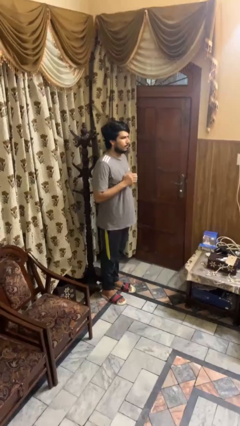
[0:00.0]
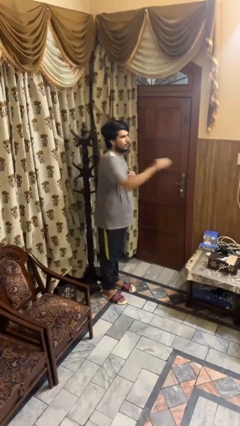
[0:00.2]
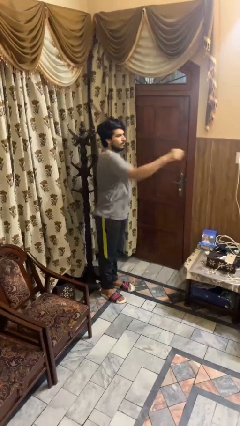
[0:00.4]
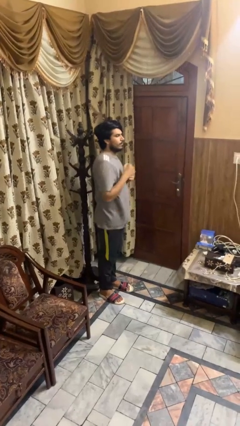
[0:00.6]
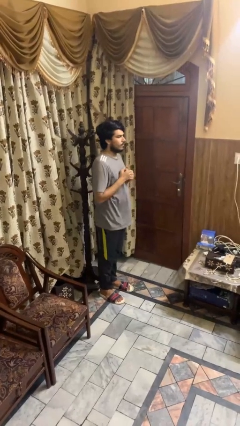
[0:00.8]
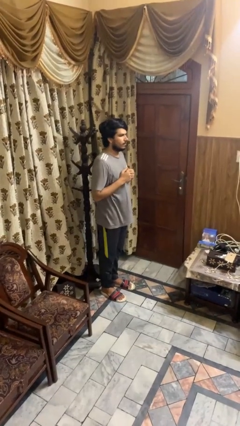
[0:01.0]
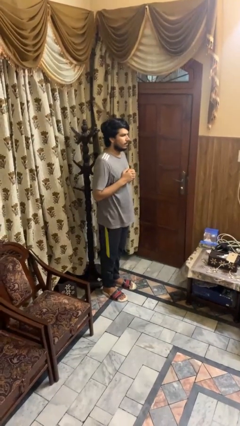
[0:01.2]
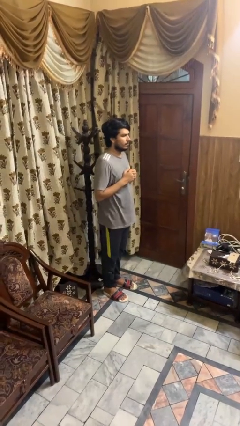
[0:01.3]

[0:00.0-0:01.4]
person karate chop

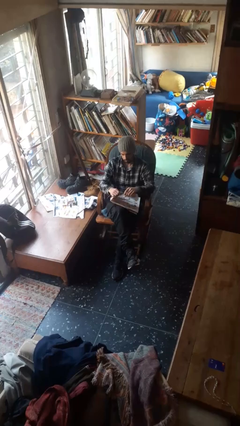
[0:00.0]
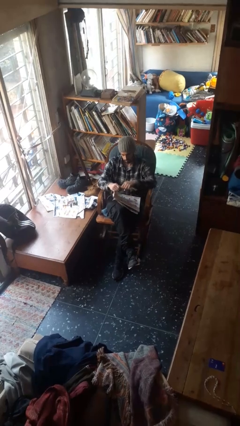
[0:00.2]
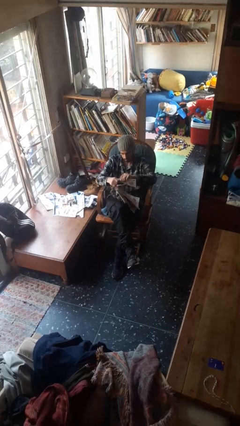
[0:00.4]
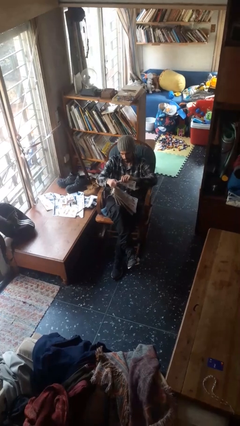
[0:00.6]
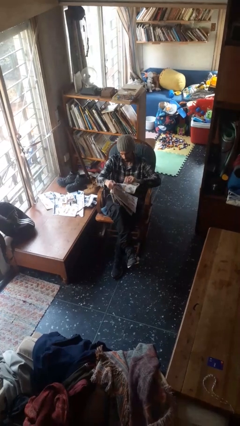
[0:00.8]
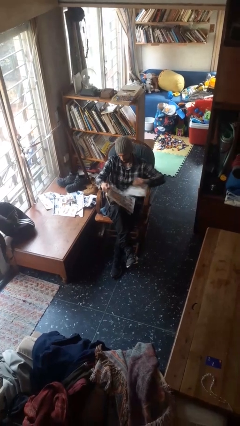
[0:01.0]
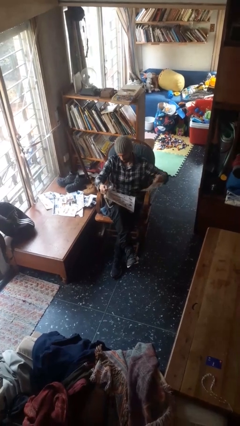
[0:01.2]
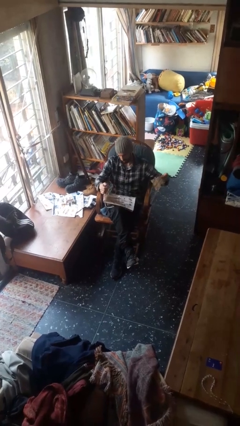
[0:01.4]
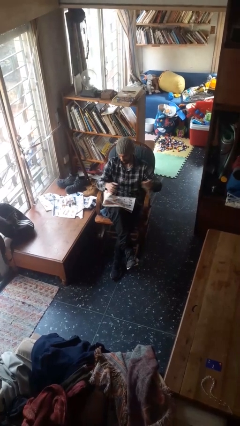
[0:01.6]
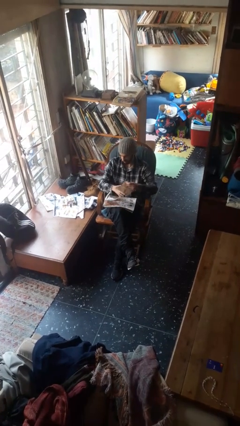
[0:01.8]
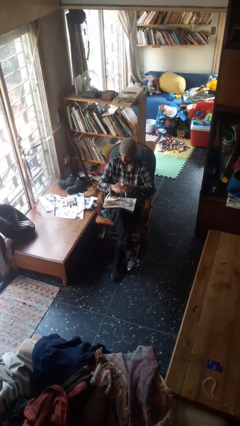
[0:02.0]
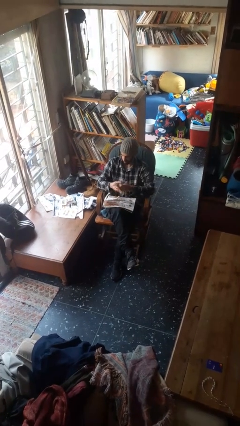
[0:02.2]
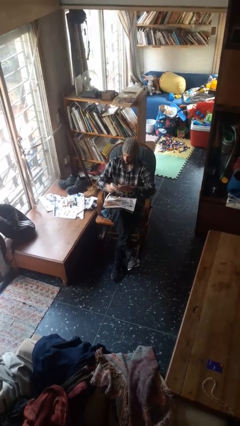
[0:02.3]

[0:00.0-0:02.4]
person tears paper

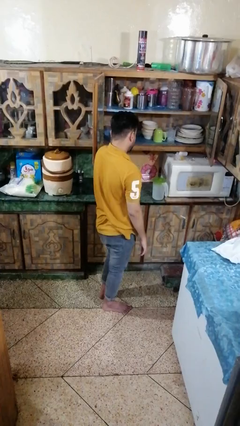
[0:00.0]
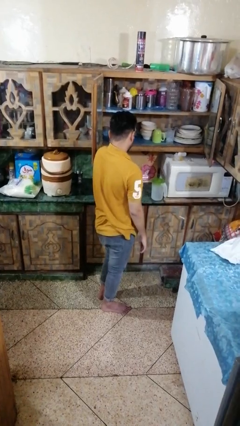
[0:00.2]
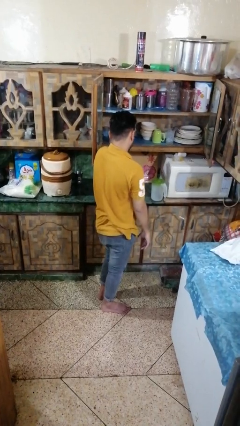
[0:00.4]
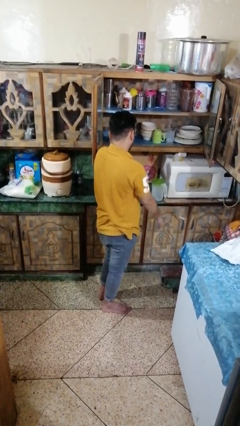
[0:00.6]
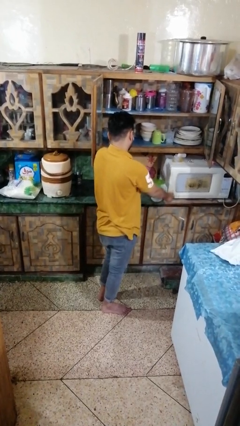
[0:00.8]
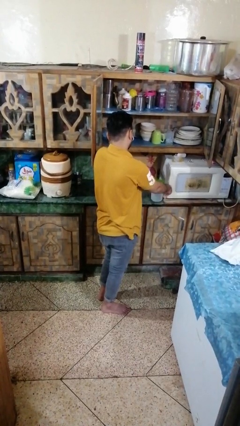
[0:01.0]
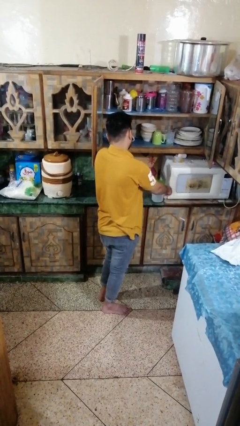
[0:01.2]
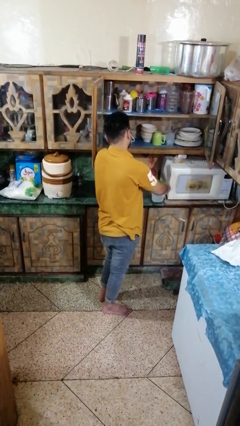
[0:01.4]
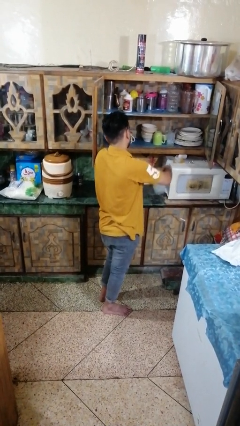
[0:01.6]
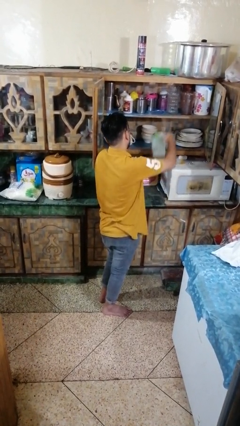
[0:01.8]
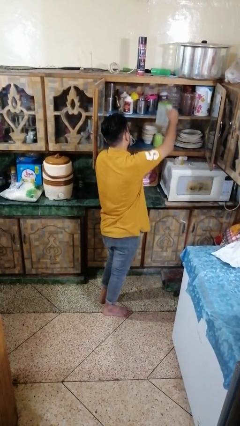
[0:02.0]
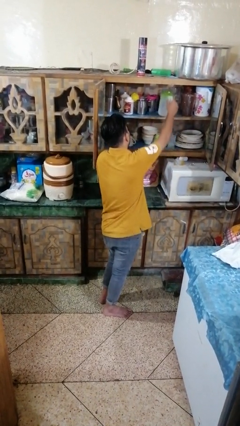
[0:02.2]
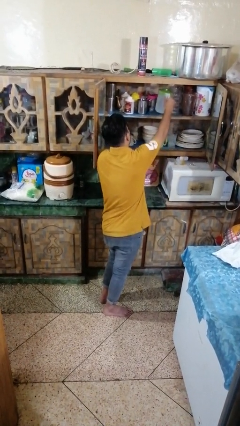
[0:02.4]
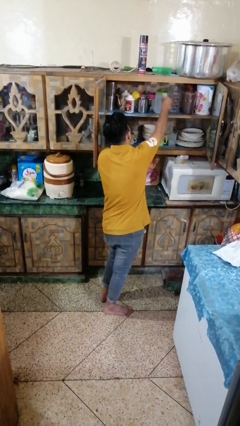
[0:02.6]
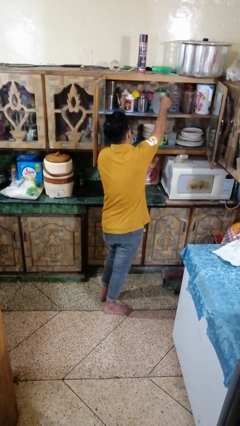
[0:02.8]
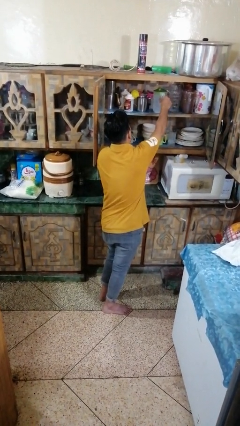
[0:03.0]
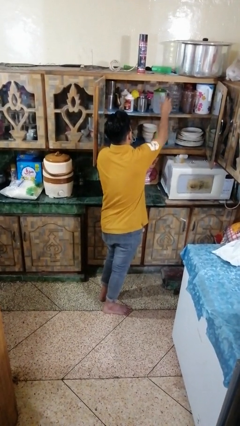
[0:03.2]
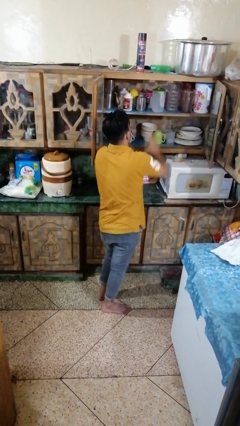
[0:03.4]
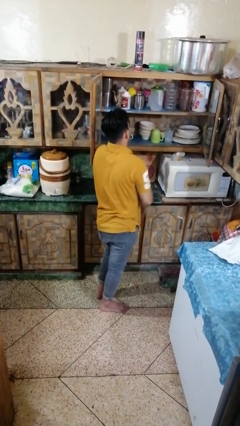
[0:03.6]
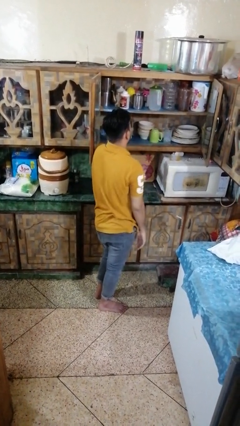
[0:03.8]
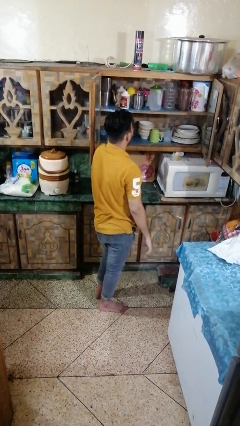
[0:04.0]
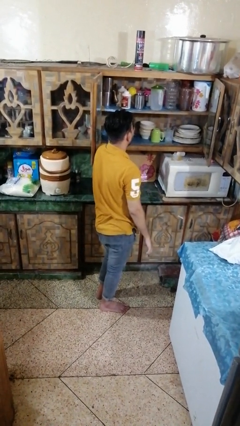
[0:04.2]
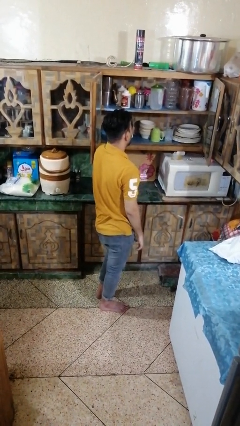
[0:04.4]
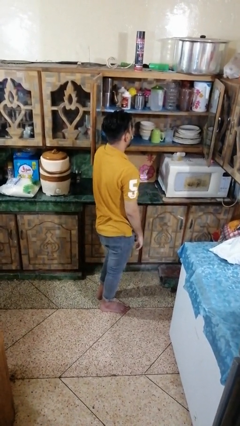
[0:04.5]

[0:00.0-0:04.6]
person puts object in cabinet

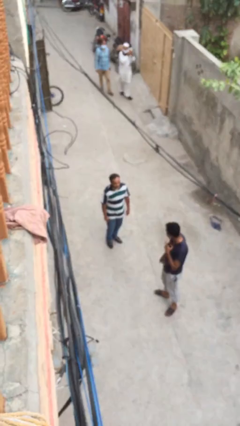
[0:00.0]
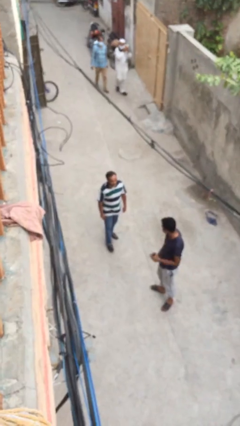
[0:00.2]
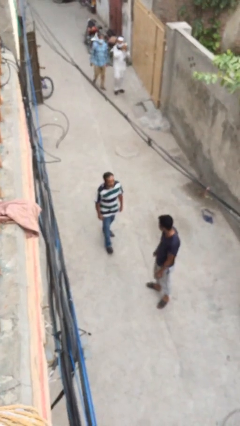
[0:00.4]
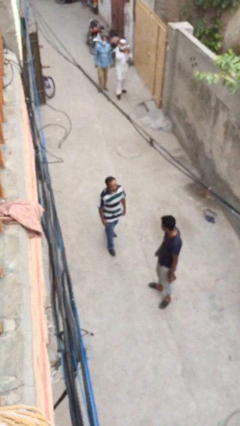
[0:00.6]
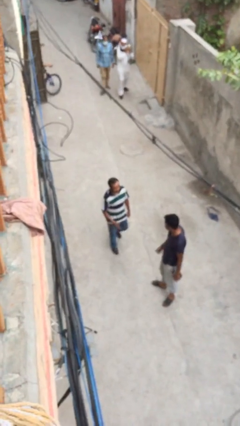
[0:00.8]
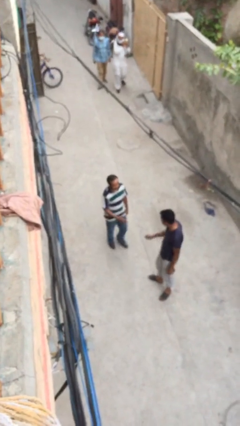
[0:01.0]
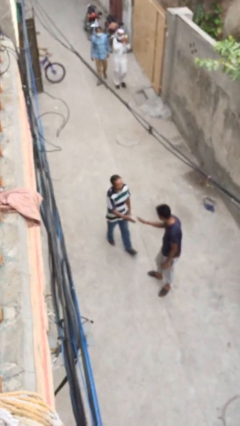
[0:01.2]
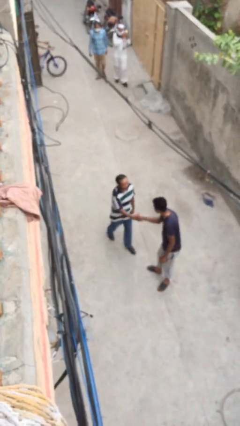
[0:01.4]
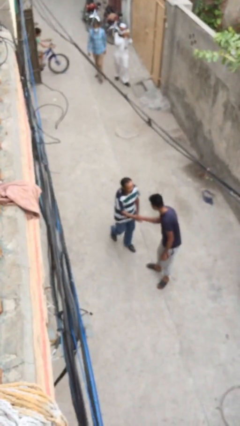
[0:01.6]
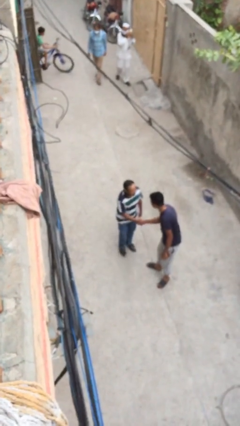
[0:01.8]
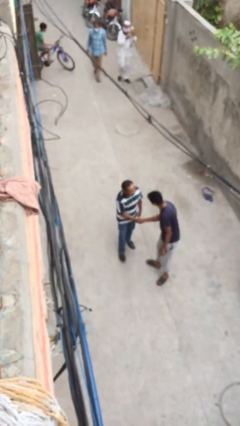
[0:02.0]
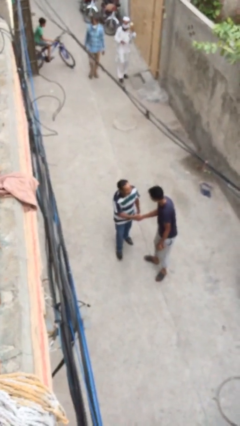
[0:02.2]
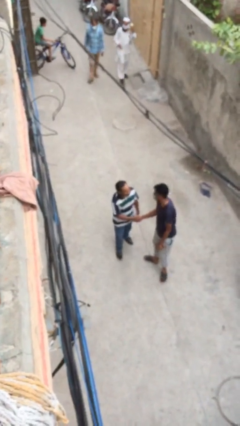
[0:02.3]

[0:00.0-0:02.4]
person shakes hand

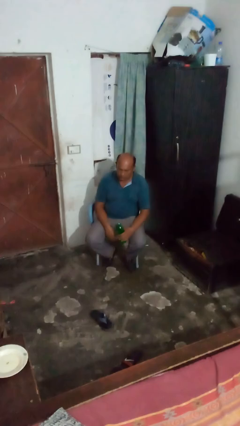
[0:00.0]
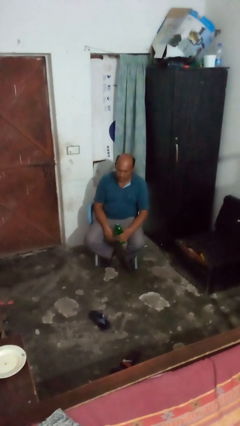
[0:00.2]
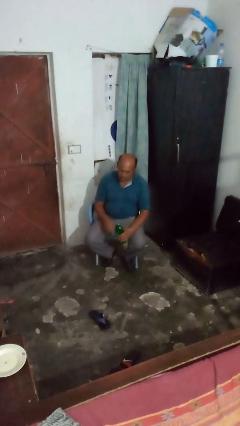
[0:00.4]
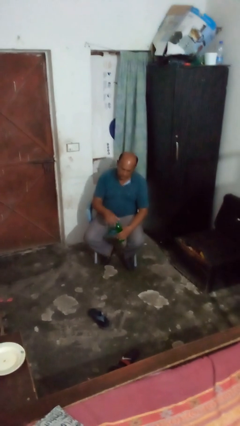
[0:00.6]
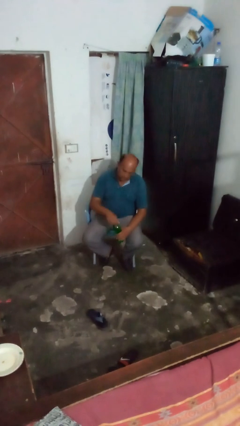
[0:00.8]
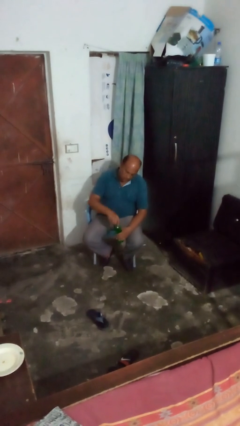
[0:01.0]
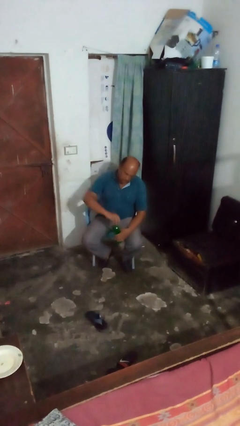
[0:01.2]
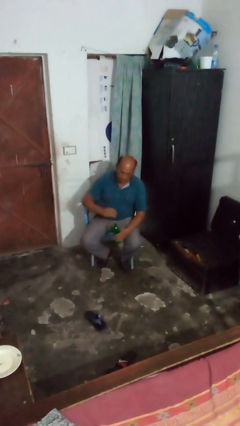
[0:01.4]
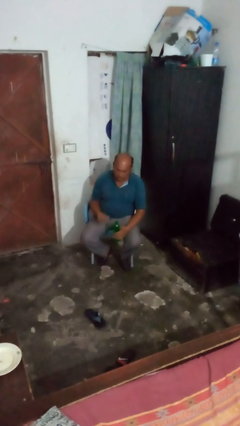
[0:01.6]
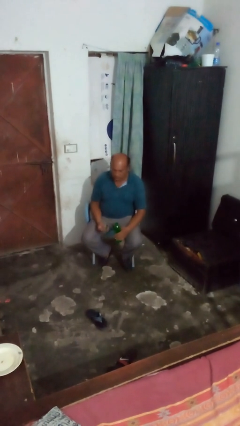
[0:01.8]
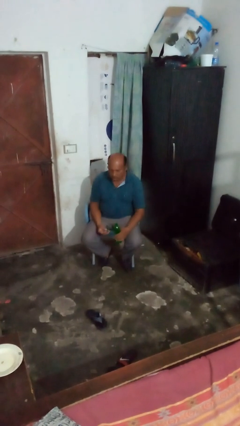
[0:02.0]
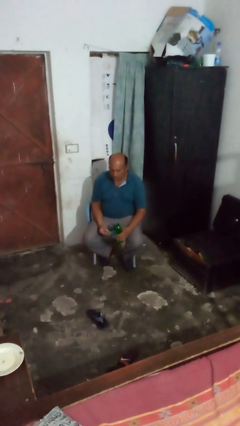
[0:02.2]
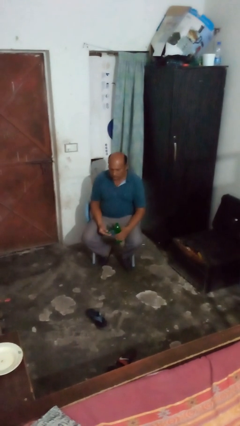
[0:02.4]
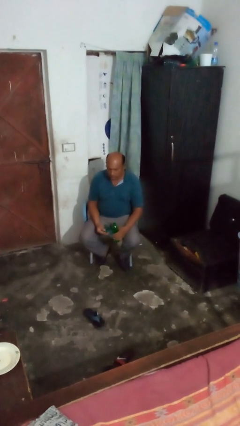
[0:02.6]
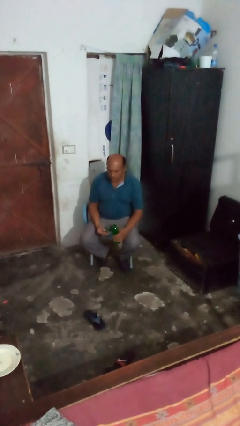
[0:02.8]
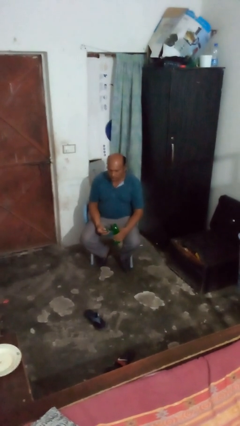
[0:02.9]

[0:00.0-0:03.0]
person unscrews lid from bottle

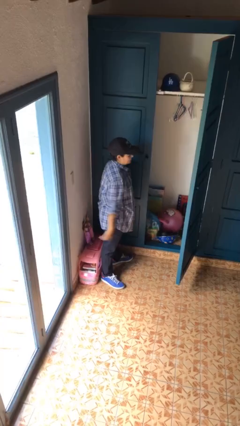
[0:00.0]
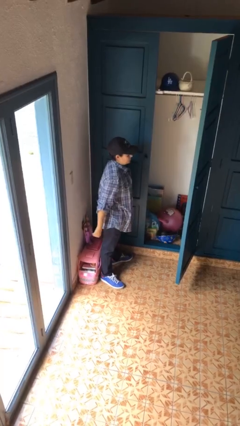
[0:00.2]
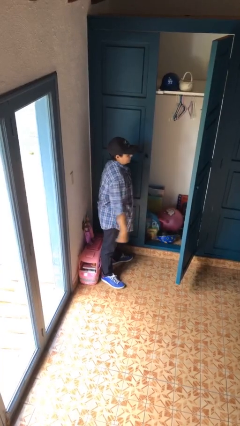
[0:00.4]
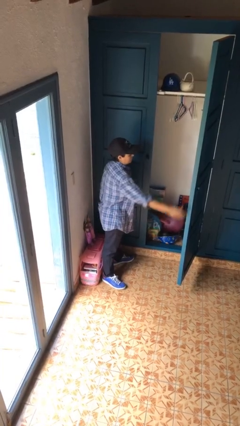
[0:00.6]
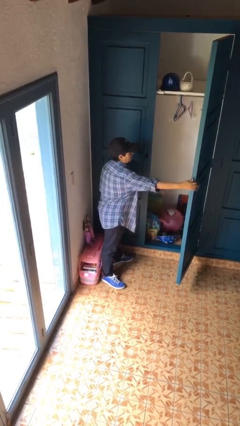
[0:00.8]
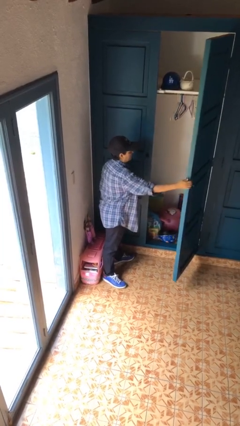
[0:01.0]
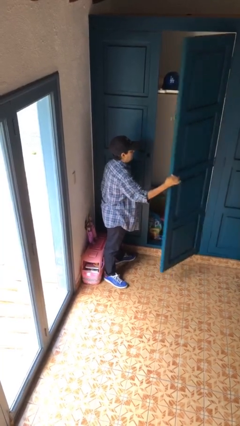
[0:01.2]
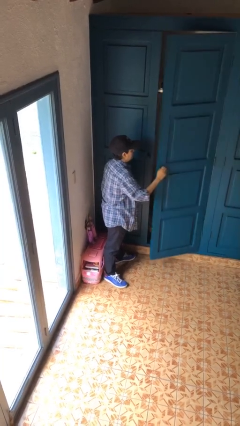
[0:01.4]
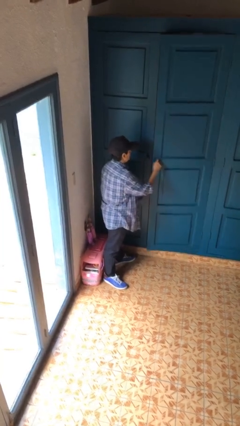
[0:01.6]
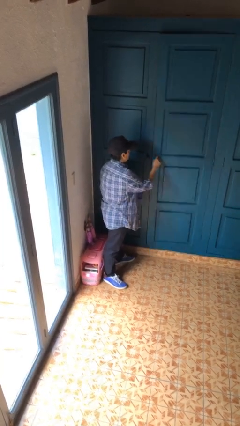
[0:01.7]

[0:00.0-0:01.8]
person closes closet door

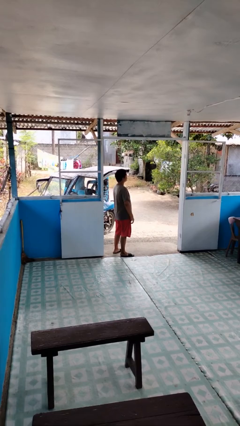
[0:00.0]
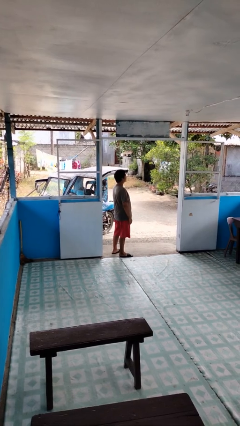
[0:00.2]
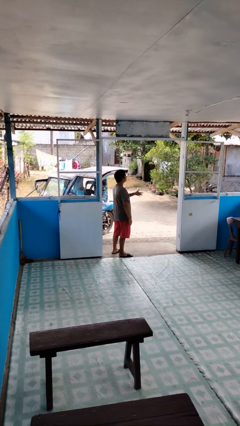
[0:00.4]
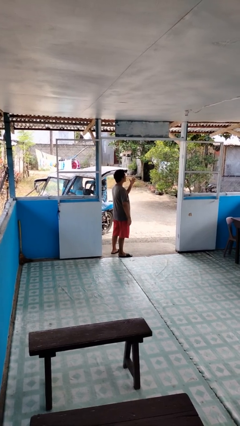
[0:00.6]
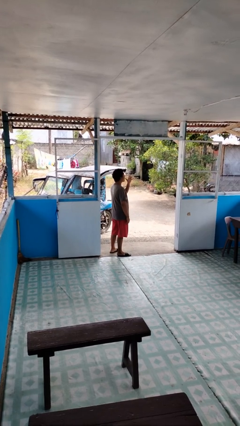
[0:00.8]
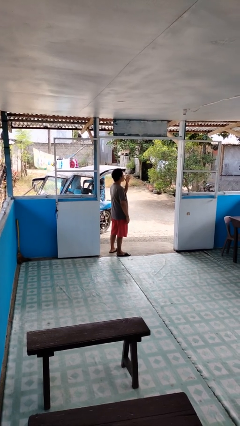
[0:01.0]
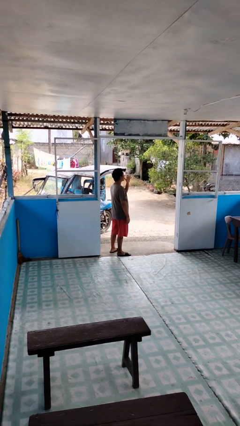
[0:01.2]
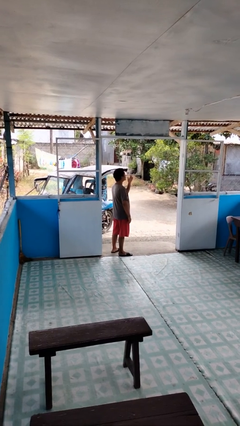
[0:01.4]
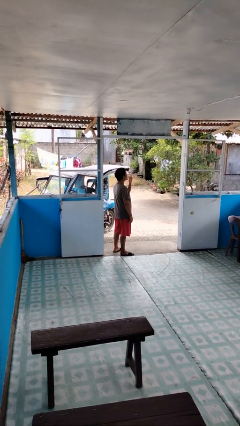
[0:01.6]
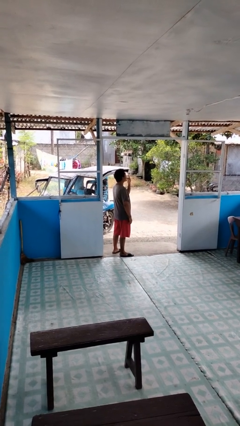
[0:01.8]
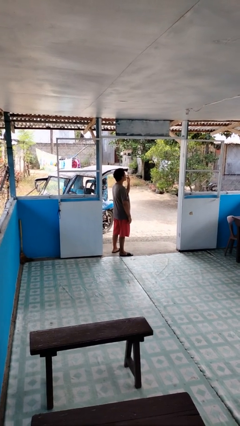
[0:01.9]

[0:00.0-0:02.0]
person licks fingers
